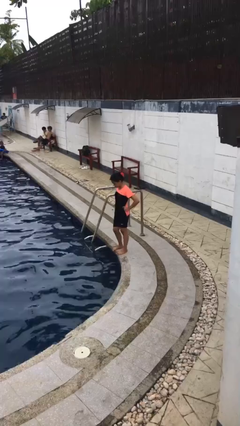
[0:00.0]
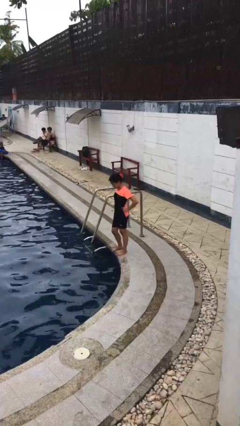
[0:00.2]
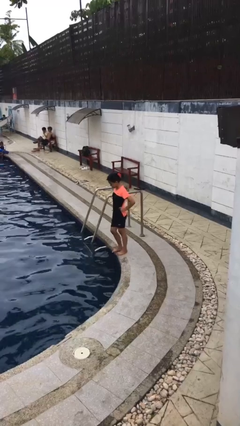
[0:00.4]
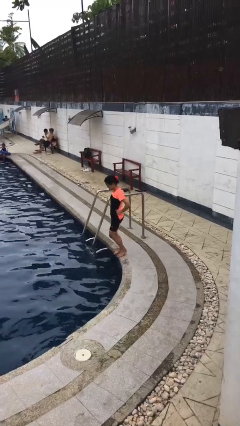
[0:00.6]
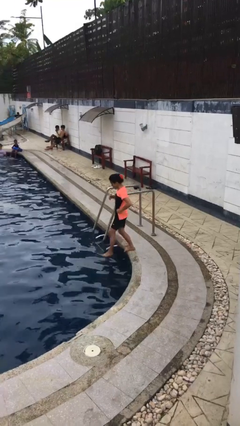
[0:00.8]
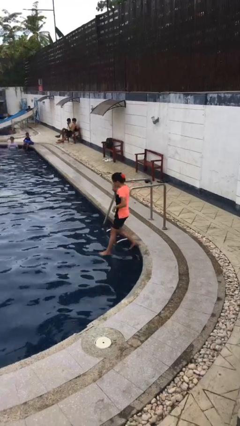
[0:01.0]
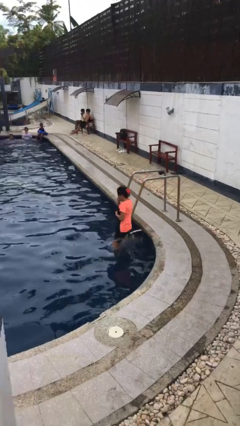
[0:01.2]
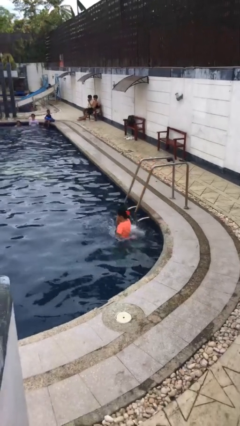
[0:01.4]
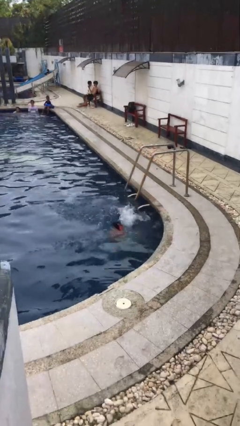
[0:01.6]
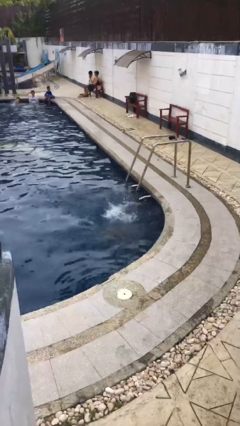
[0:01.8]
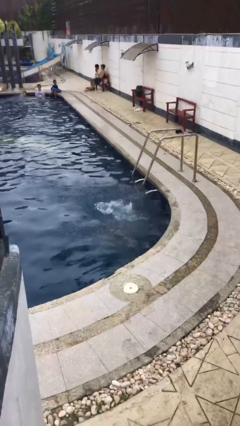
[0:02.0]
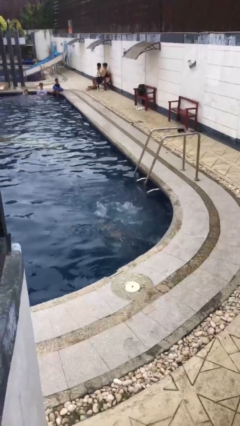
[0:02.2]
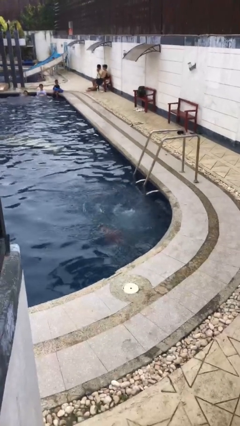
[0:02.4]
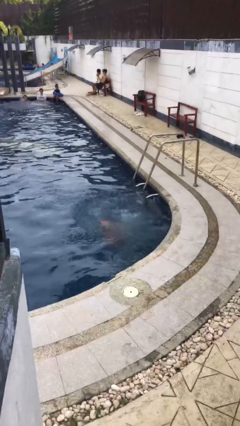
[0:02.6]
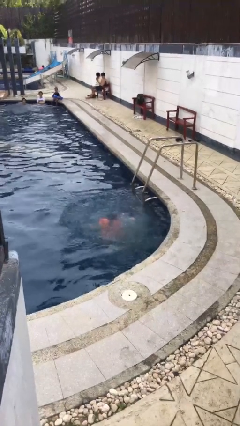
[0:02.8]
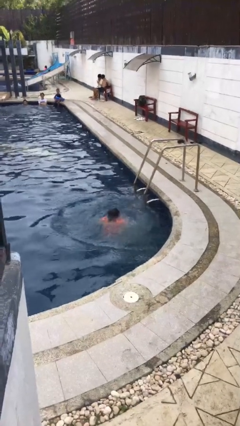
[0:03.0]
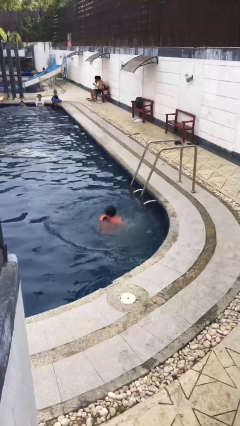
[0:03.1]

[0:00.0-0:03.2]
person jumps into pool

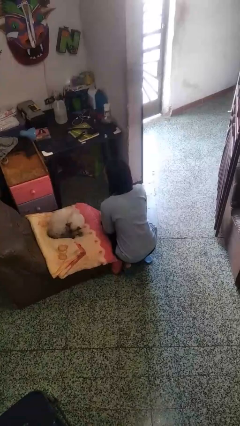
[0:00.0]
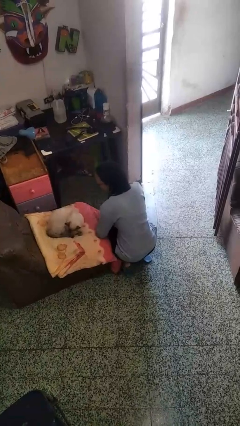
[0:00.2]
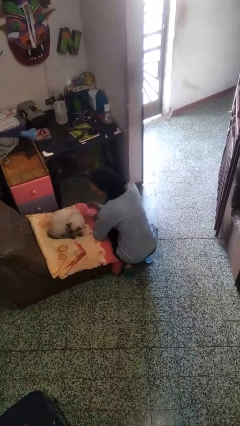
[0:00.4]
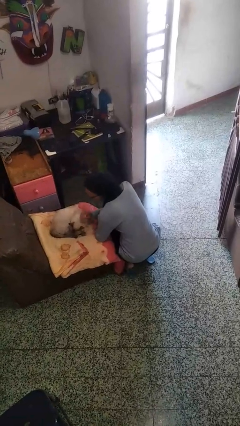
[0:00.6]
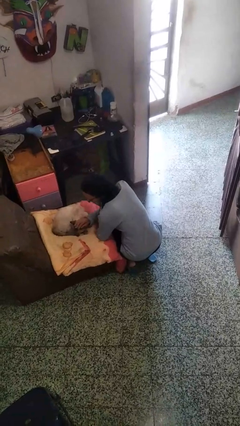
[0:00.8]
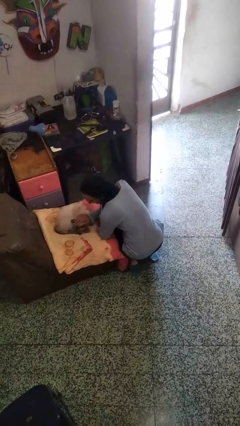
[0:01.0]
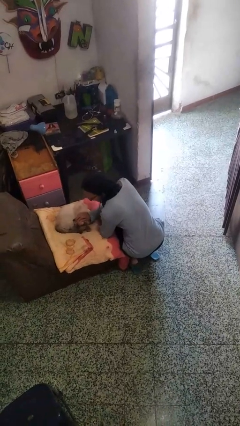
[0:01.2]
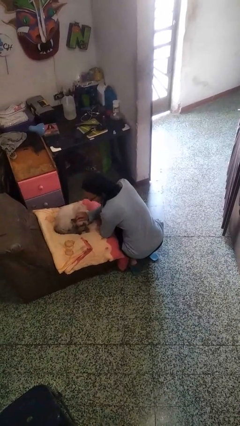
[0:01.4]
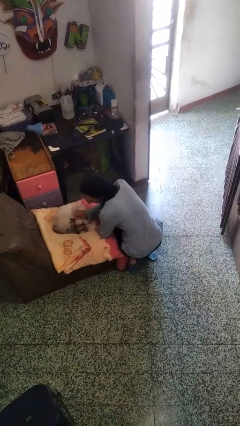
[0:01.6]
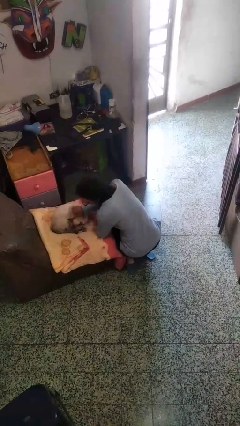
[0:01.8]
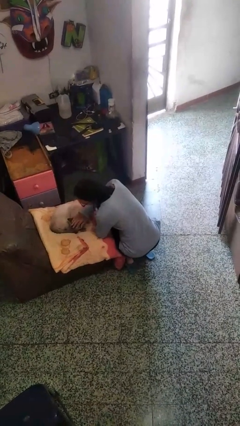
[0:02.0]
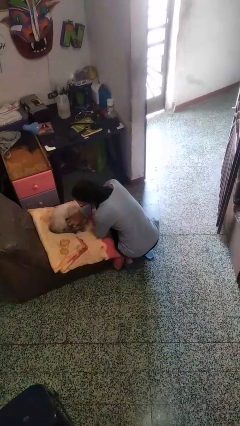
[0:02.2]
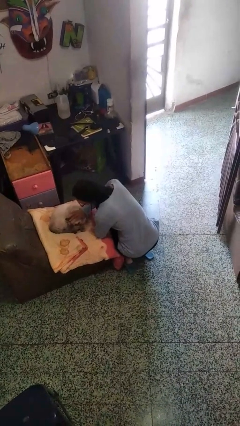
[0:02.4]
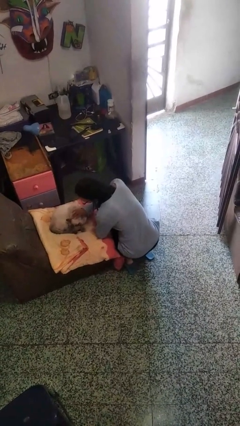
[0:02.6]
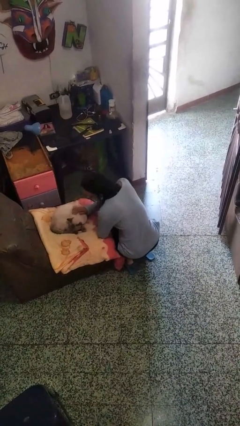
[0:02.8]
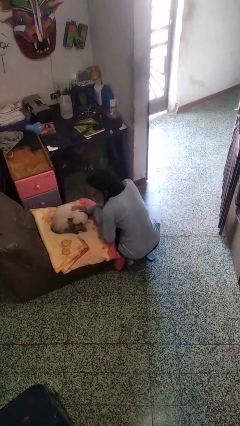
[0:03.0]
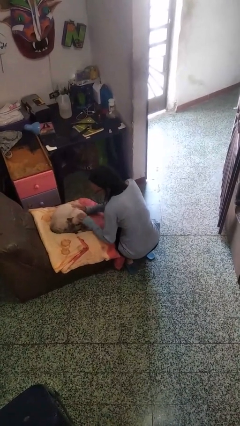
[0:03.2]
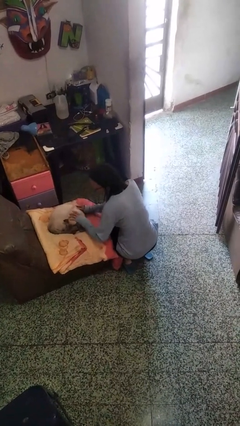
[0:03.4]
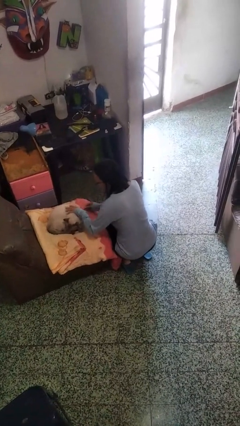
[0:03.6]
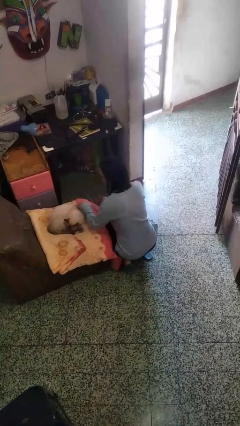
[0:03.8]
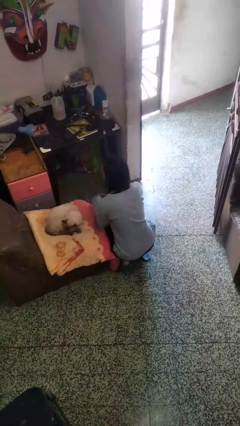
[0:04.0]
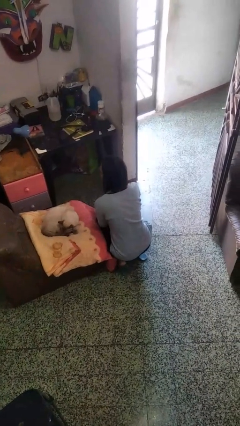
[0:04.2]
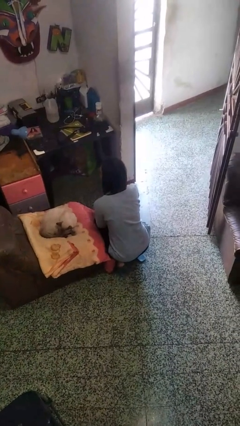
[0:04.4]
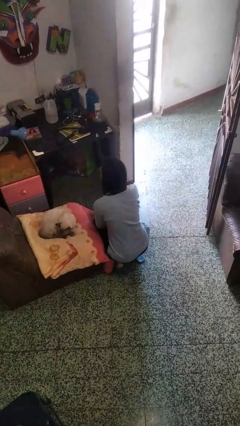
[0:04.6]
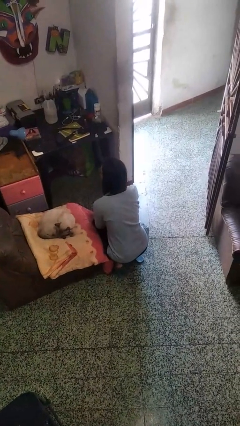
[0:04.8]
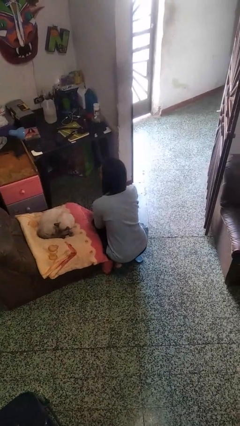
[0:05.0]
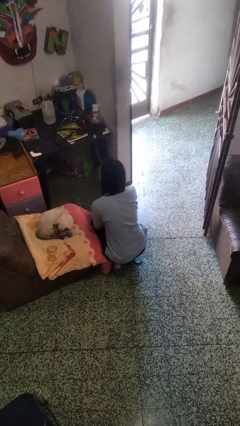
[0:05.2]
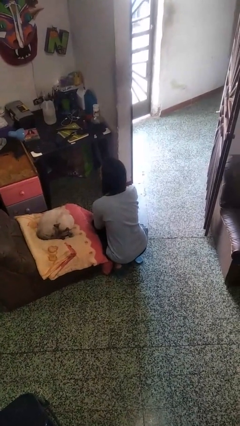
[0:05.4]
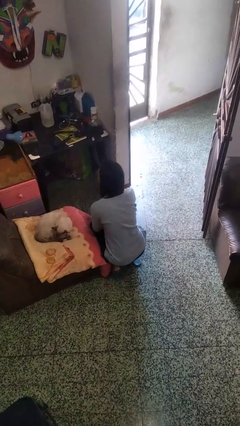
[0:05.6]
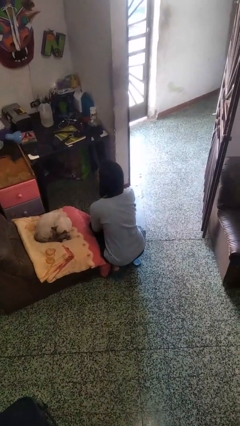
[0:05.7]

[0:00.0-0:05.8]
person pets cat

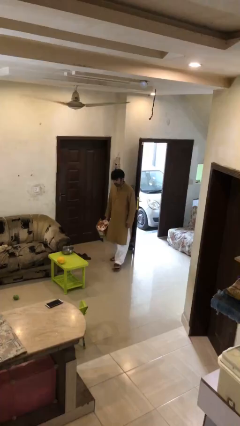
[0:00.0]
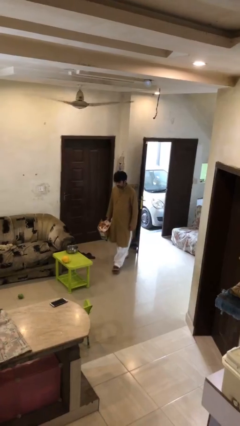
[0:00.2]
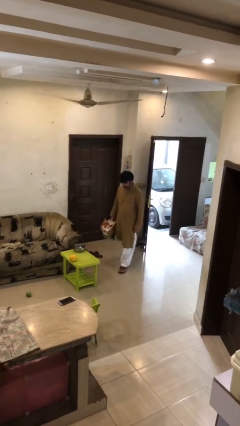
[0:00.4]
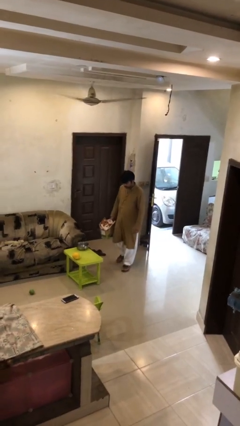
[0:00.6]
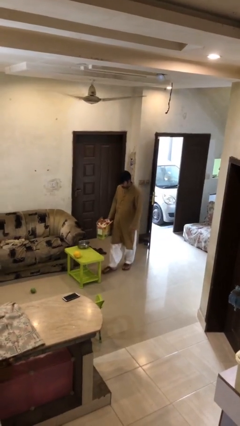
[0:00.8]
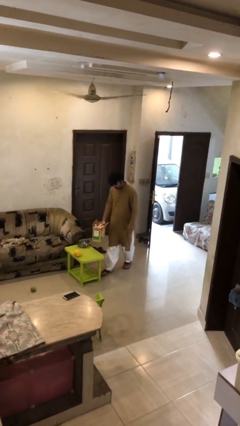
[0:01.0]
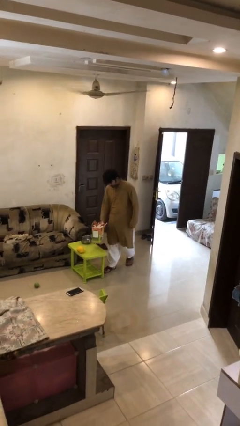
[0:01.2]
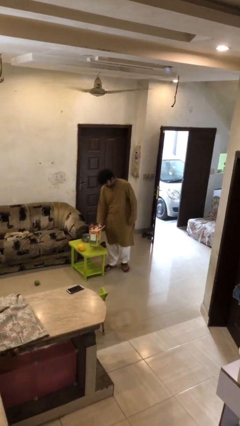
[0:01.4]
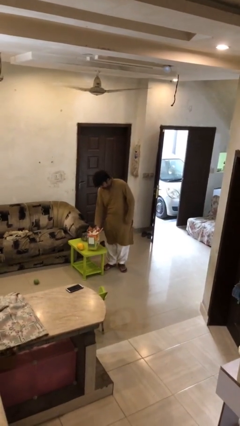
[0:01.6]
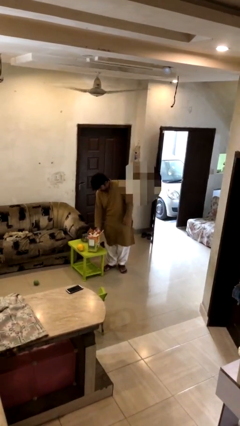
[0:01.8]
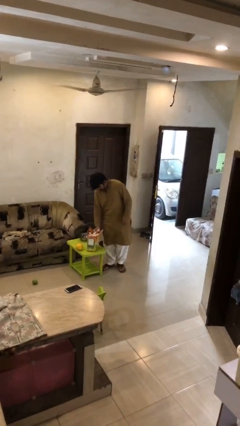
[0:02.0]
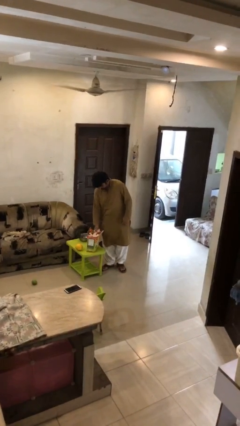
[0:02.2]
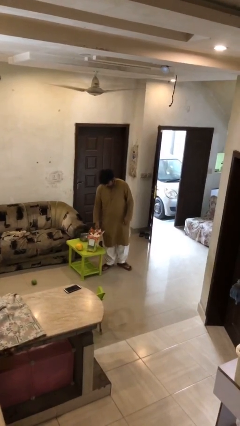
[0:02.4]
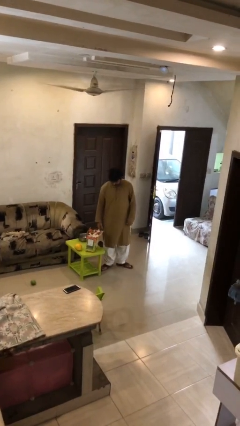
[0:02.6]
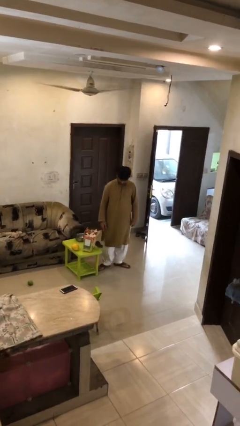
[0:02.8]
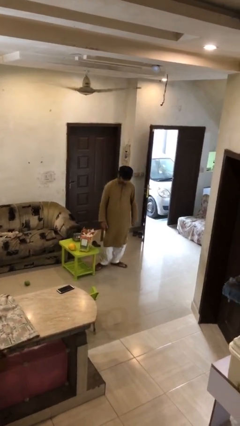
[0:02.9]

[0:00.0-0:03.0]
person puts down object on table

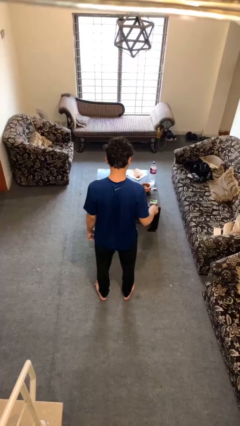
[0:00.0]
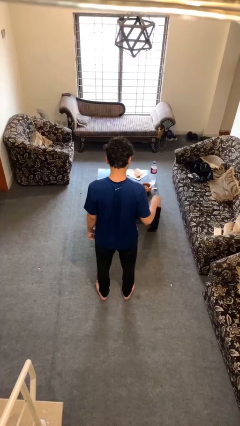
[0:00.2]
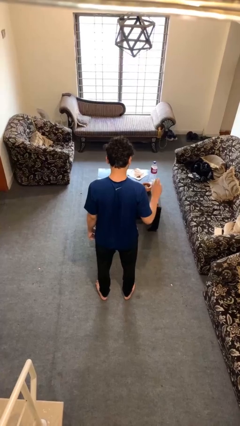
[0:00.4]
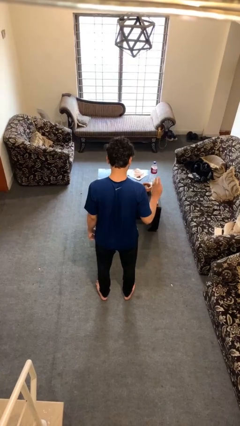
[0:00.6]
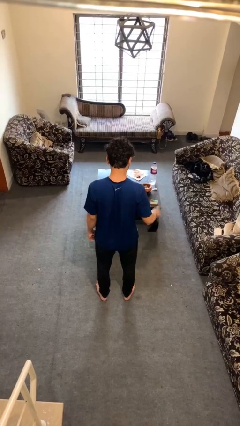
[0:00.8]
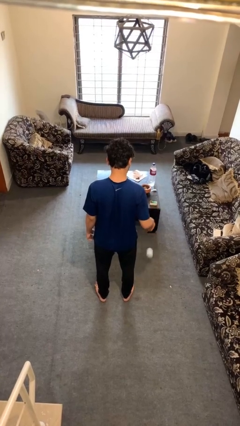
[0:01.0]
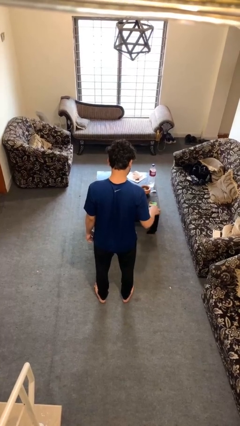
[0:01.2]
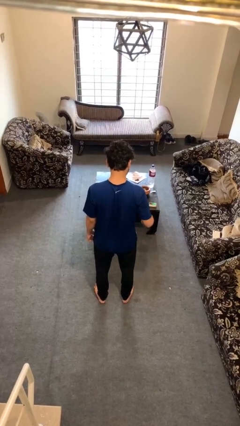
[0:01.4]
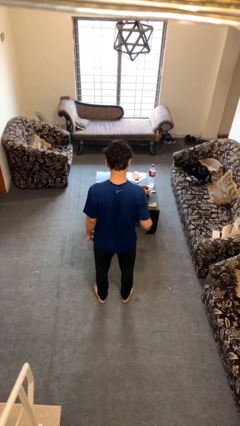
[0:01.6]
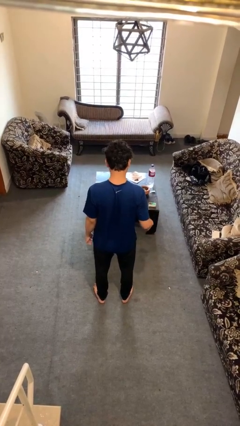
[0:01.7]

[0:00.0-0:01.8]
person bounces ball on floor

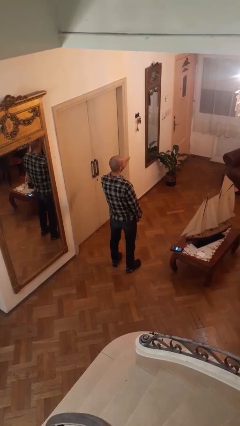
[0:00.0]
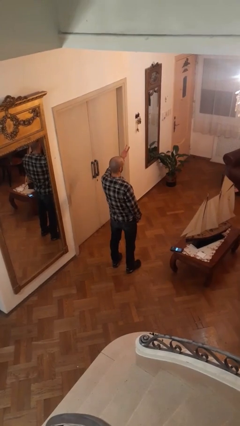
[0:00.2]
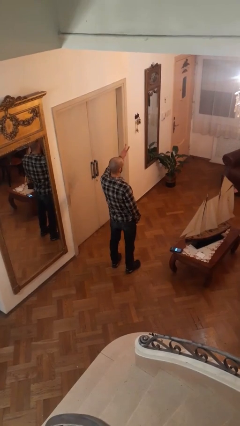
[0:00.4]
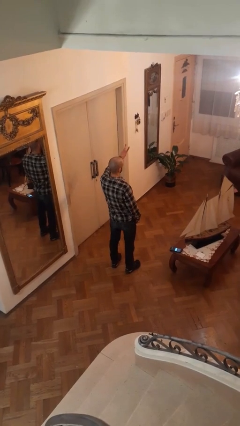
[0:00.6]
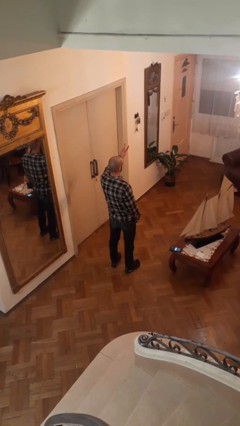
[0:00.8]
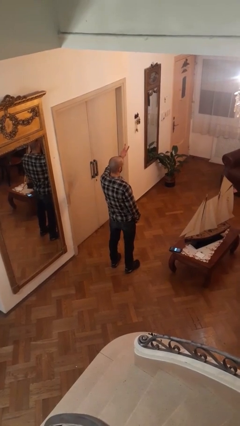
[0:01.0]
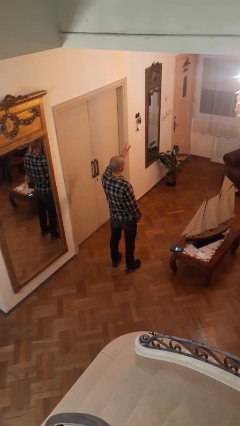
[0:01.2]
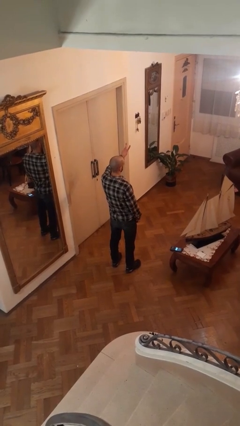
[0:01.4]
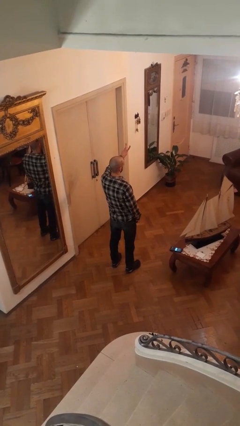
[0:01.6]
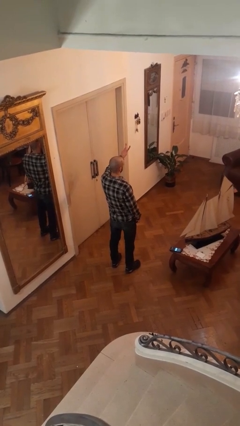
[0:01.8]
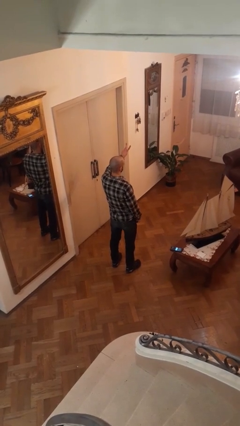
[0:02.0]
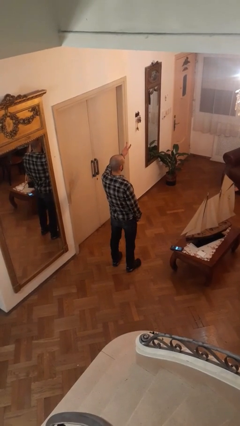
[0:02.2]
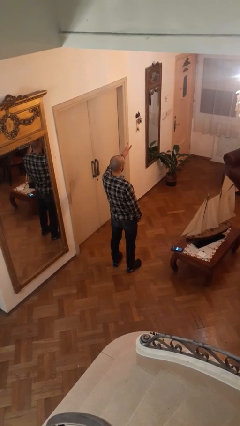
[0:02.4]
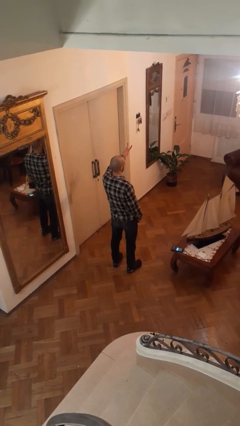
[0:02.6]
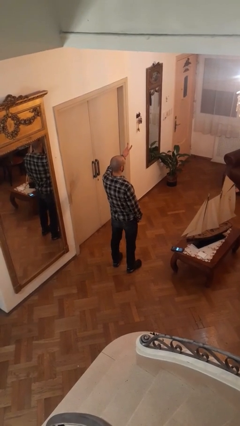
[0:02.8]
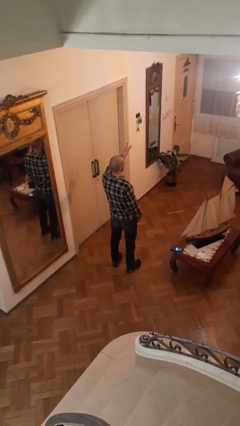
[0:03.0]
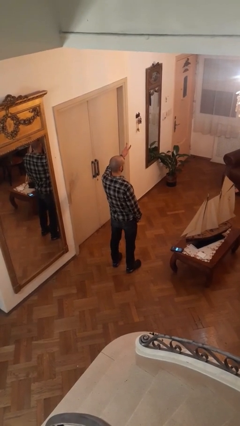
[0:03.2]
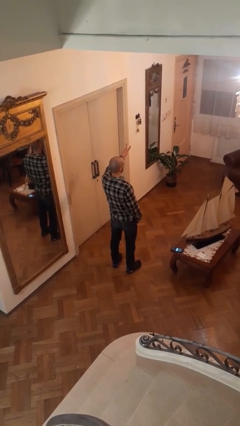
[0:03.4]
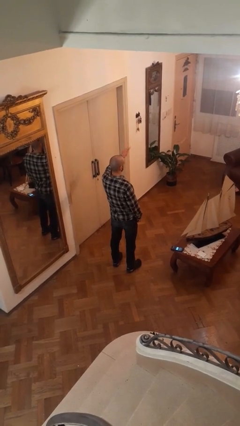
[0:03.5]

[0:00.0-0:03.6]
person gestures peace
